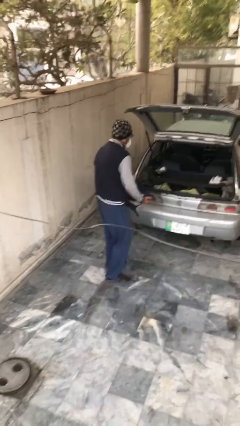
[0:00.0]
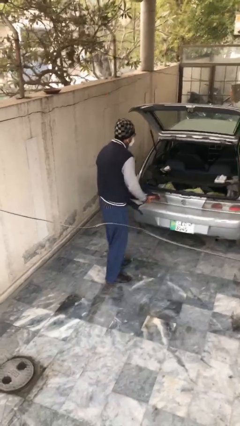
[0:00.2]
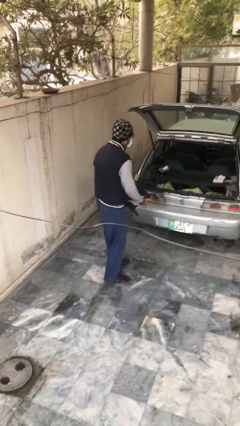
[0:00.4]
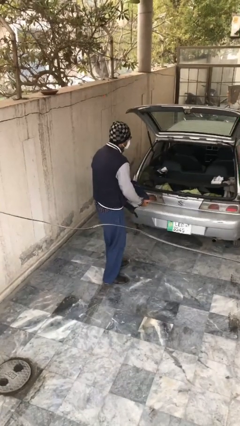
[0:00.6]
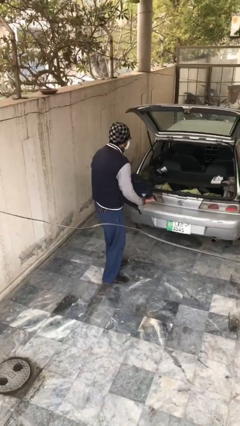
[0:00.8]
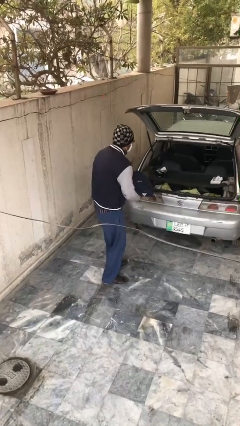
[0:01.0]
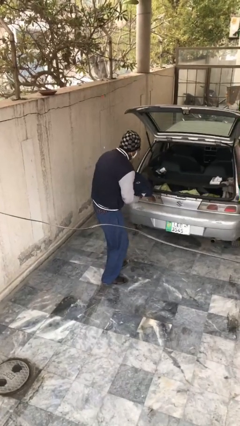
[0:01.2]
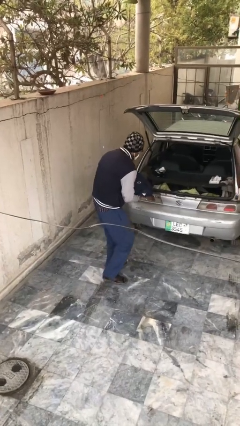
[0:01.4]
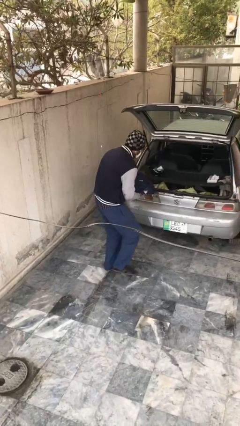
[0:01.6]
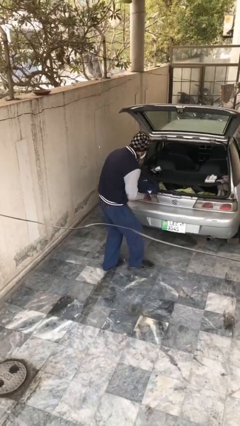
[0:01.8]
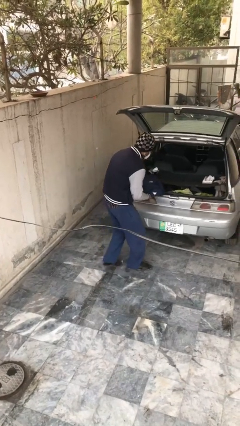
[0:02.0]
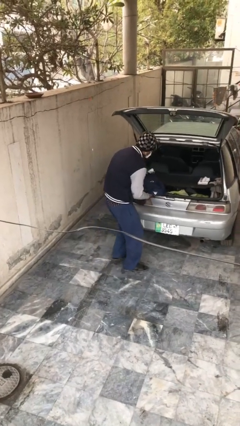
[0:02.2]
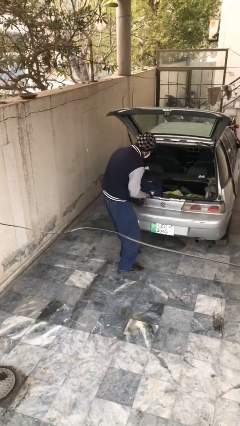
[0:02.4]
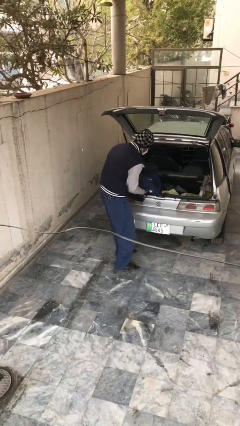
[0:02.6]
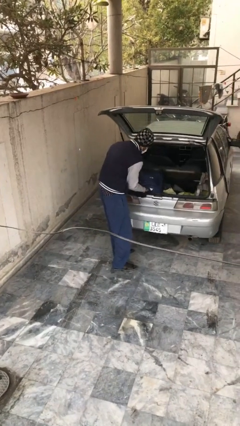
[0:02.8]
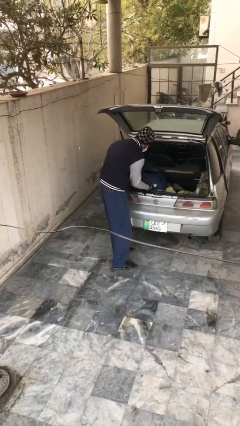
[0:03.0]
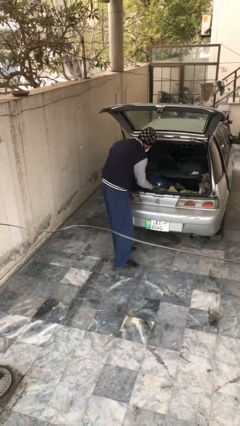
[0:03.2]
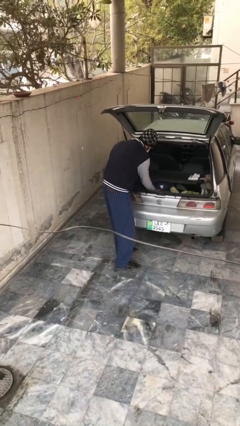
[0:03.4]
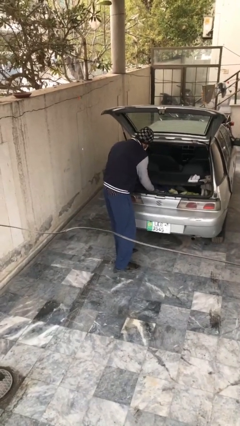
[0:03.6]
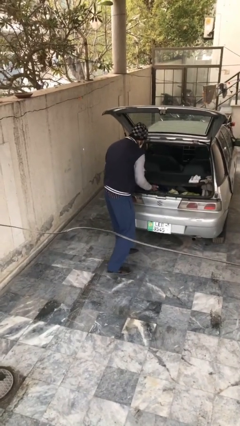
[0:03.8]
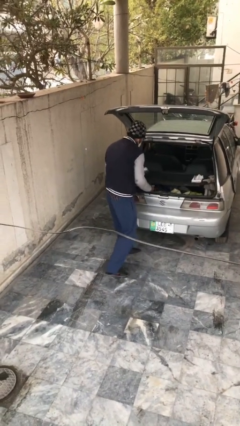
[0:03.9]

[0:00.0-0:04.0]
person loads car

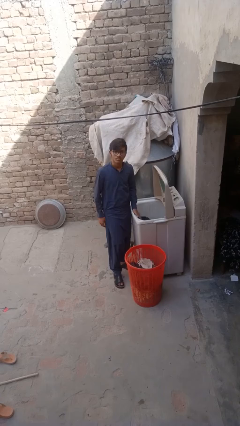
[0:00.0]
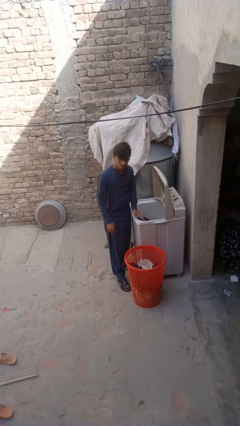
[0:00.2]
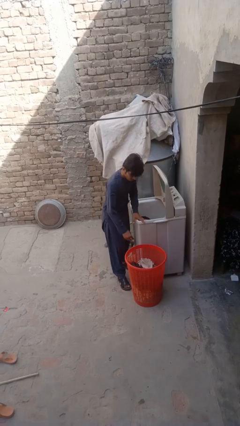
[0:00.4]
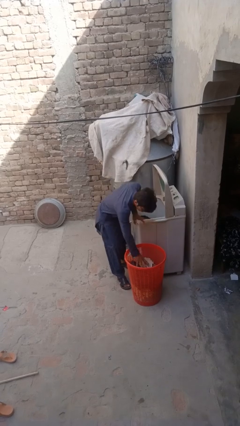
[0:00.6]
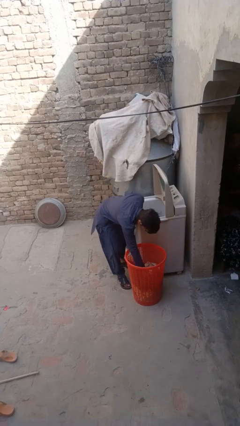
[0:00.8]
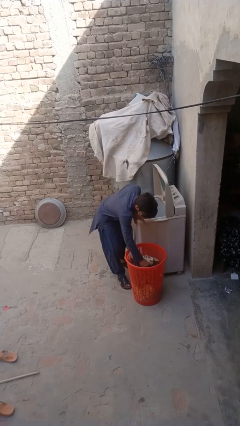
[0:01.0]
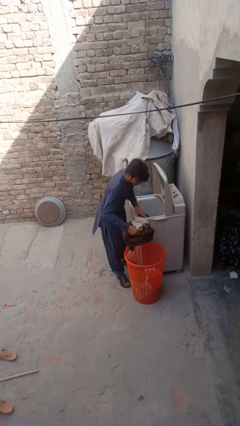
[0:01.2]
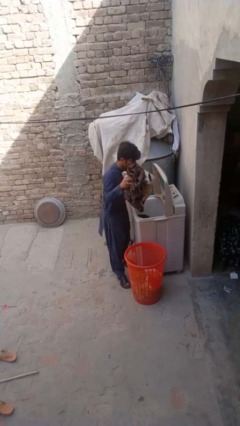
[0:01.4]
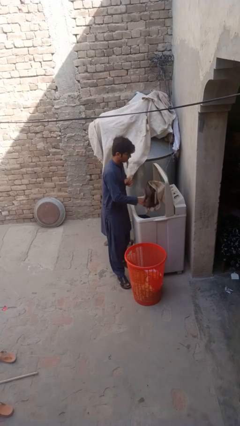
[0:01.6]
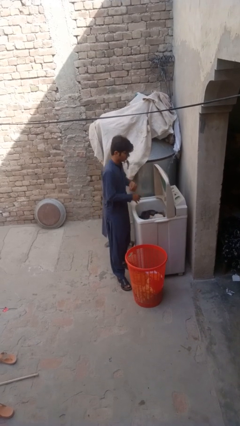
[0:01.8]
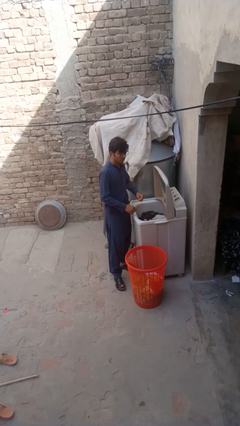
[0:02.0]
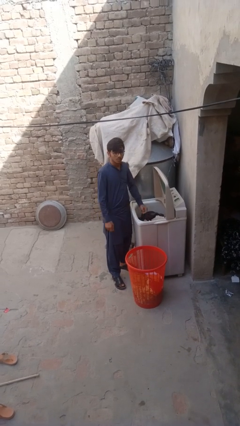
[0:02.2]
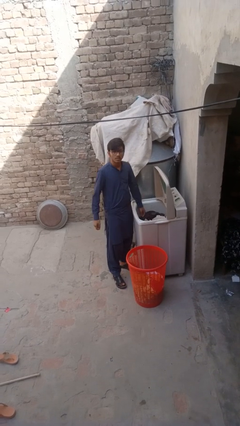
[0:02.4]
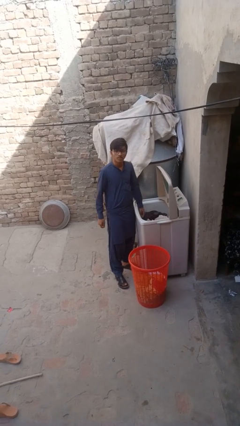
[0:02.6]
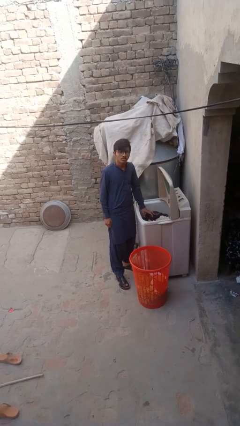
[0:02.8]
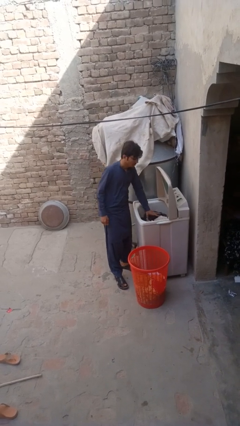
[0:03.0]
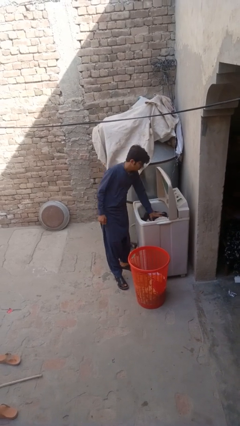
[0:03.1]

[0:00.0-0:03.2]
person loads clotheswasher

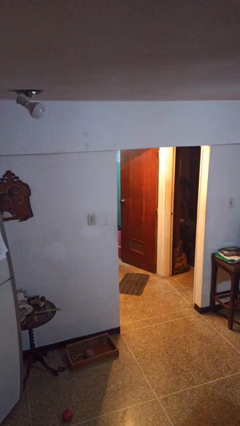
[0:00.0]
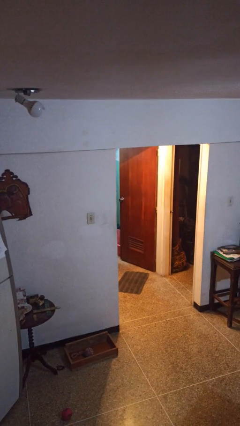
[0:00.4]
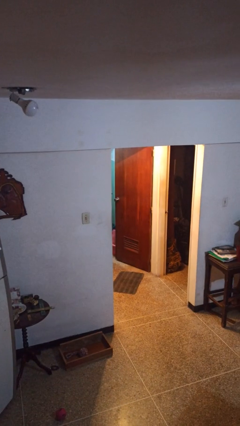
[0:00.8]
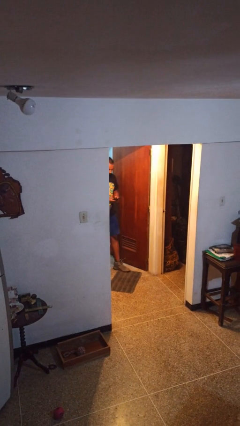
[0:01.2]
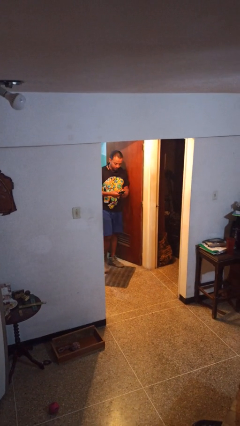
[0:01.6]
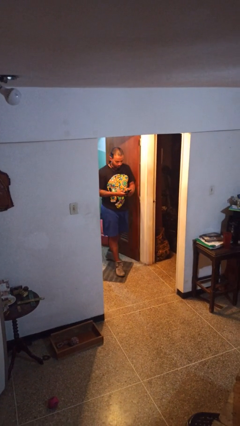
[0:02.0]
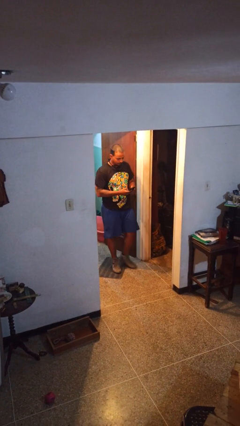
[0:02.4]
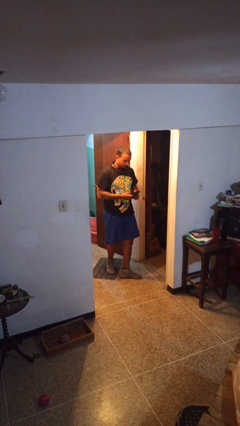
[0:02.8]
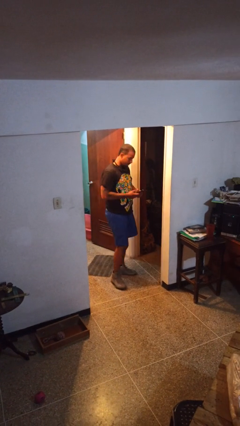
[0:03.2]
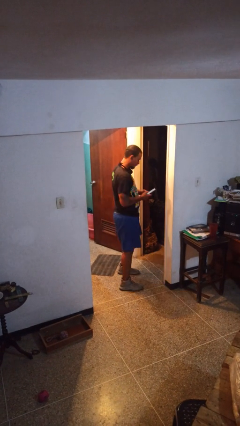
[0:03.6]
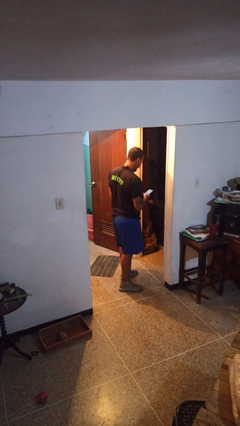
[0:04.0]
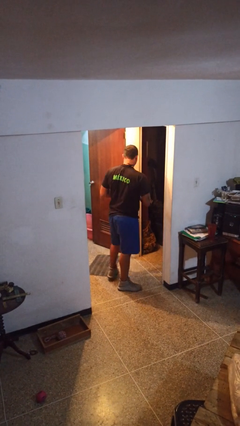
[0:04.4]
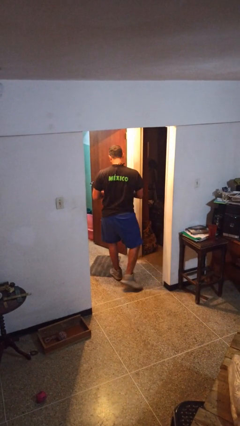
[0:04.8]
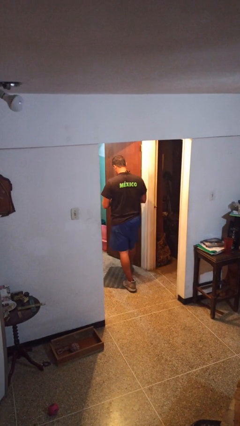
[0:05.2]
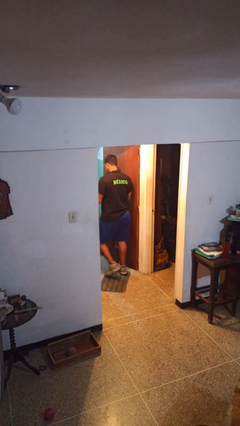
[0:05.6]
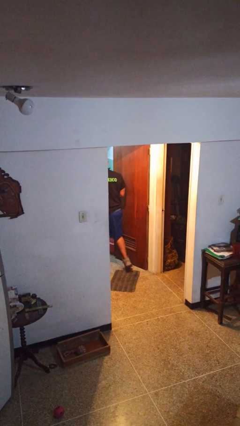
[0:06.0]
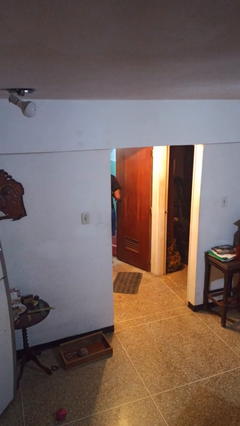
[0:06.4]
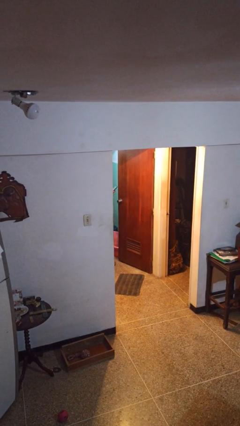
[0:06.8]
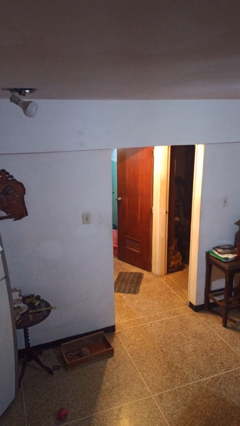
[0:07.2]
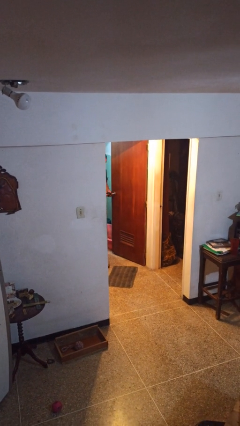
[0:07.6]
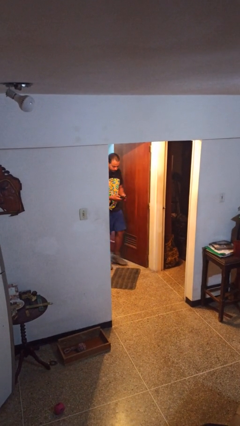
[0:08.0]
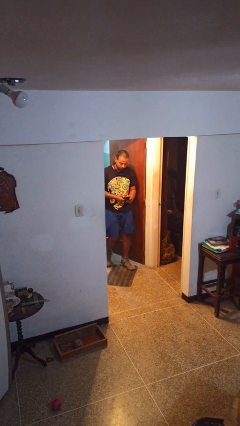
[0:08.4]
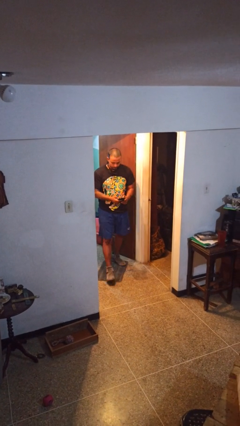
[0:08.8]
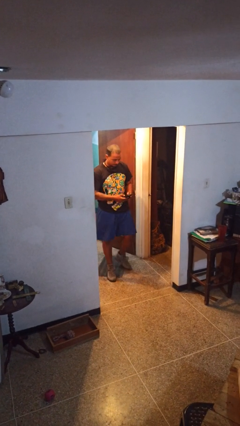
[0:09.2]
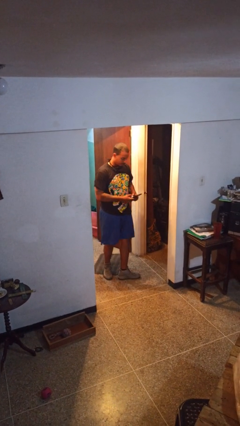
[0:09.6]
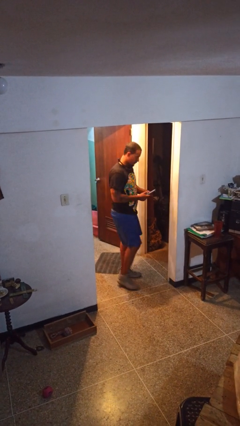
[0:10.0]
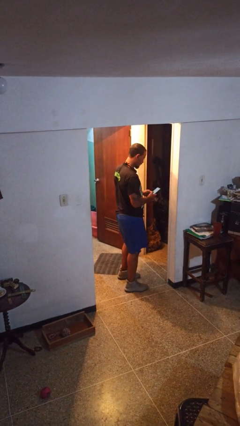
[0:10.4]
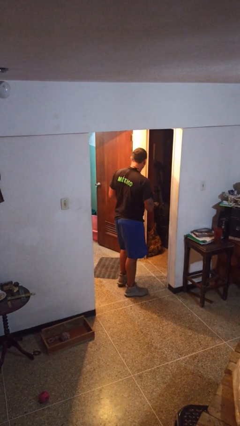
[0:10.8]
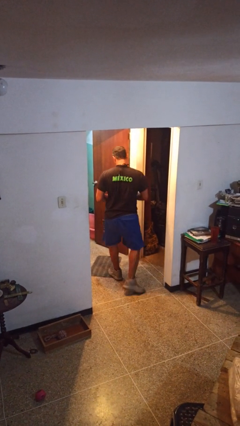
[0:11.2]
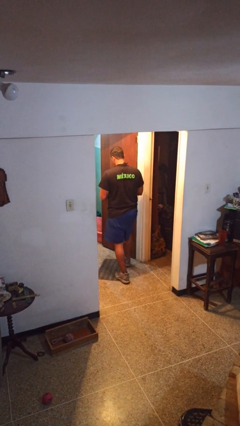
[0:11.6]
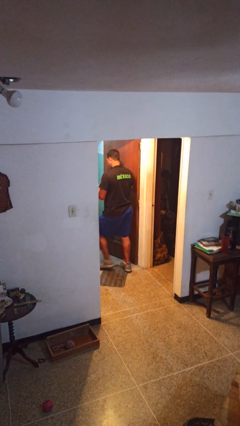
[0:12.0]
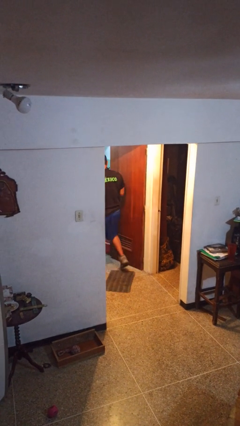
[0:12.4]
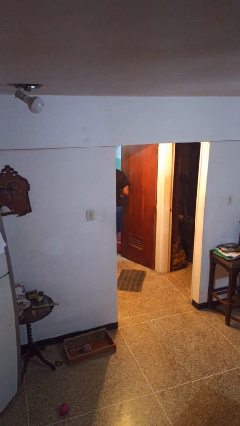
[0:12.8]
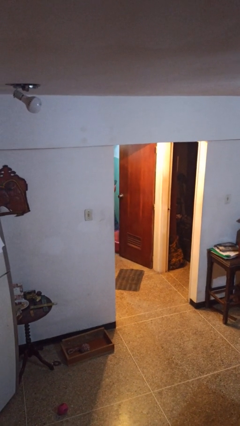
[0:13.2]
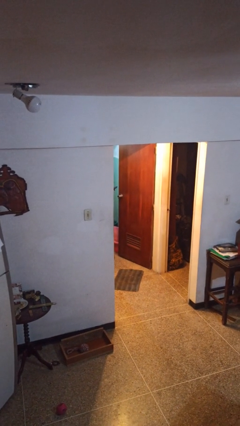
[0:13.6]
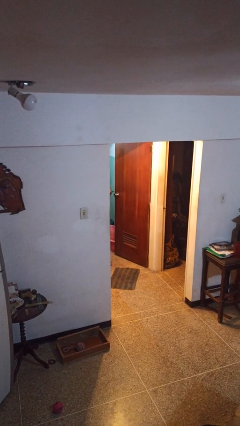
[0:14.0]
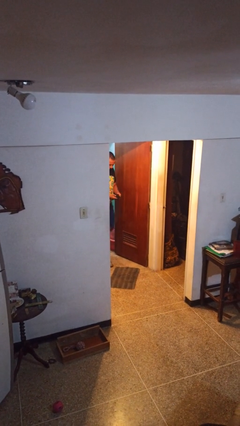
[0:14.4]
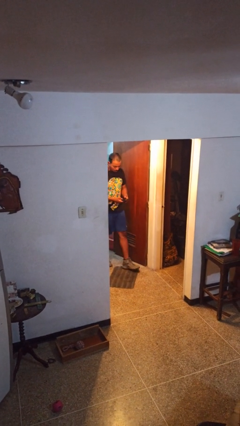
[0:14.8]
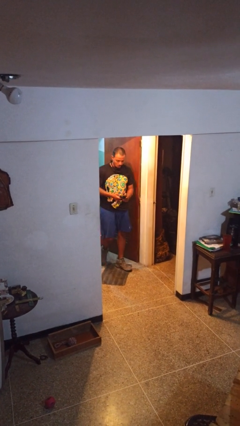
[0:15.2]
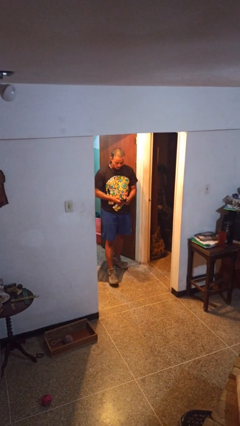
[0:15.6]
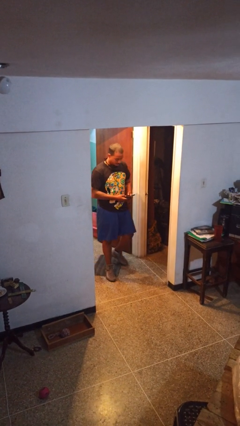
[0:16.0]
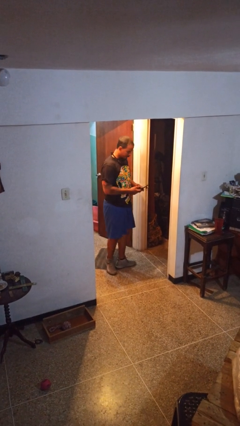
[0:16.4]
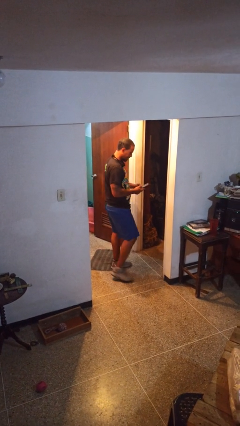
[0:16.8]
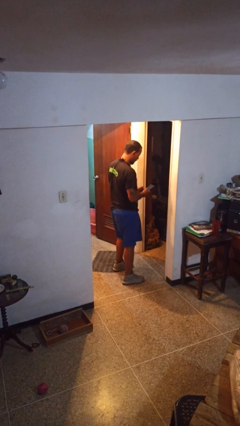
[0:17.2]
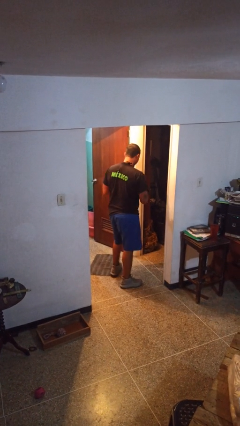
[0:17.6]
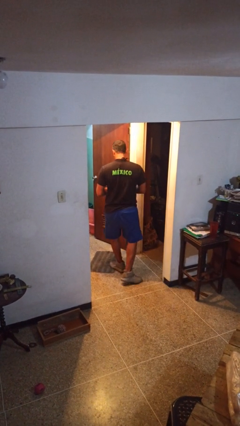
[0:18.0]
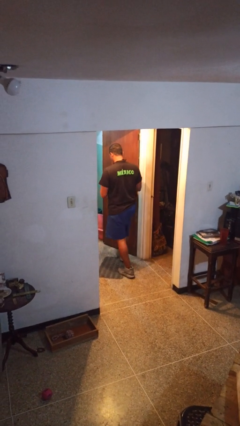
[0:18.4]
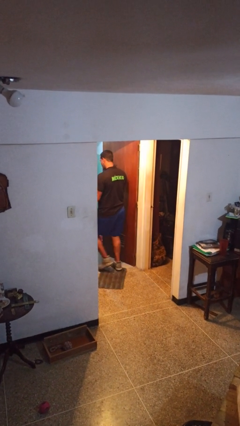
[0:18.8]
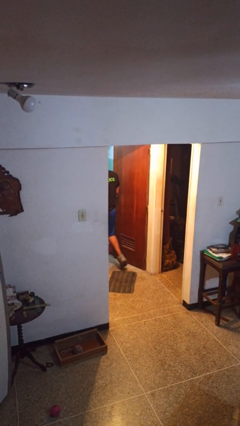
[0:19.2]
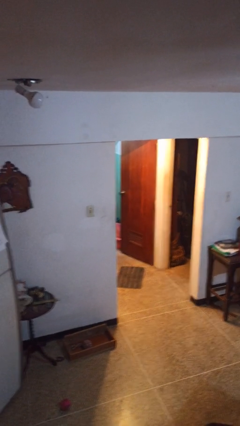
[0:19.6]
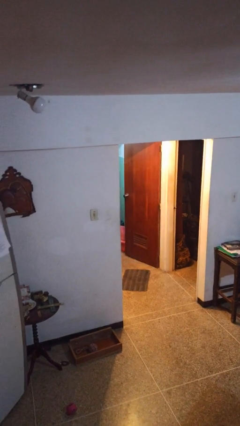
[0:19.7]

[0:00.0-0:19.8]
person texts on phone

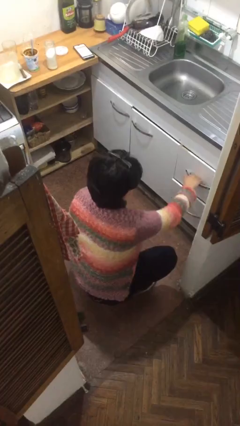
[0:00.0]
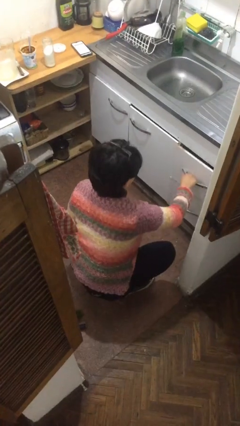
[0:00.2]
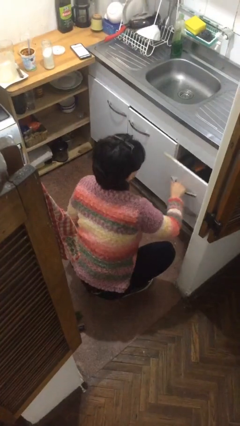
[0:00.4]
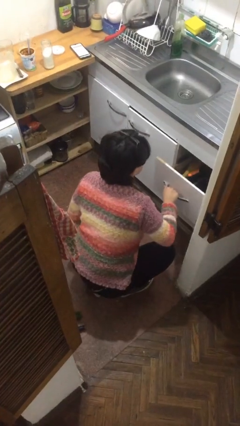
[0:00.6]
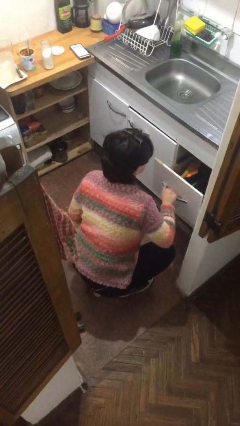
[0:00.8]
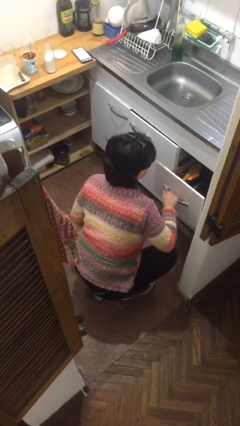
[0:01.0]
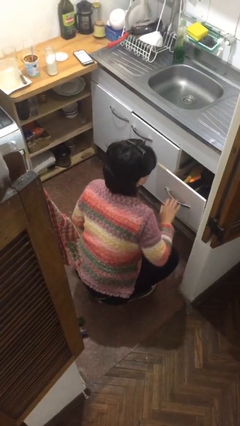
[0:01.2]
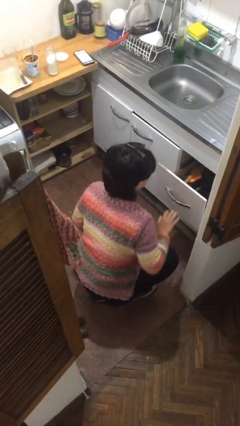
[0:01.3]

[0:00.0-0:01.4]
person opens kitchen drawer
